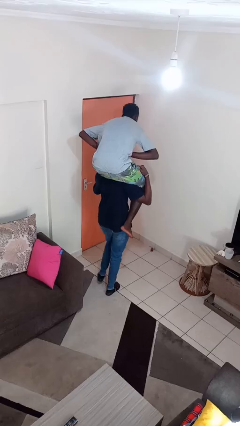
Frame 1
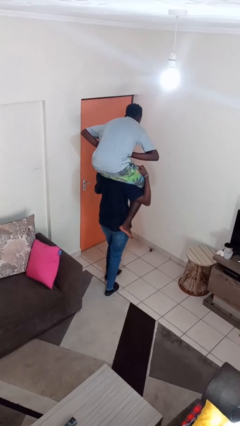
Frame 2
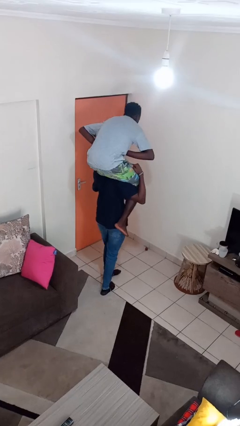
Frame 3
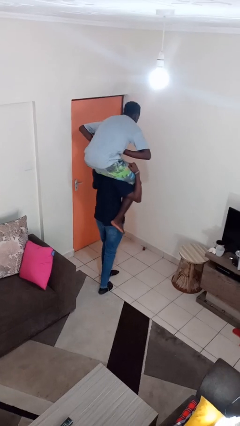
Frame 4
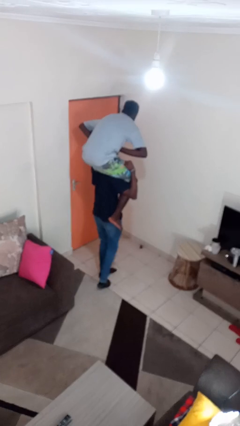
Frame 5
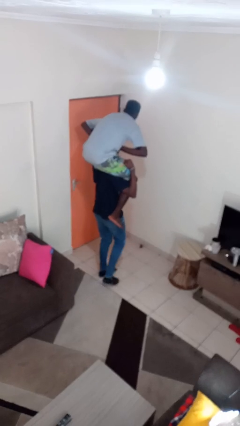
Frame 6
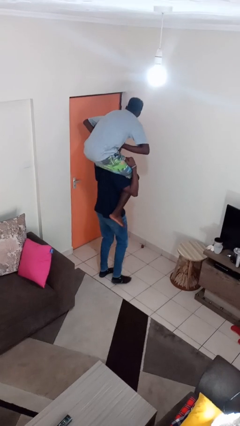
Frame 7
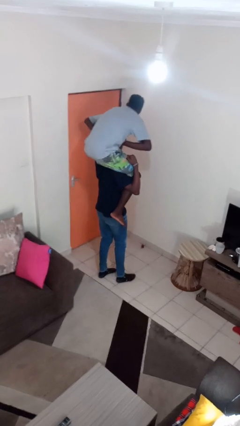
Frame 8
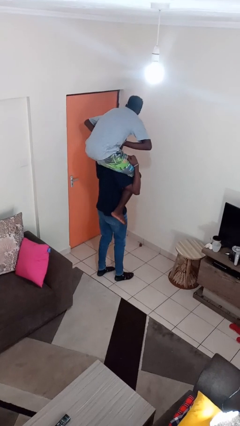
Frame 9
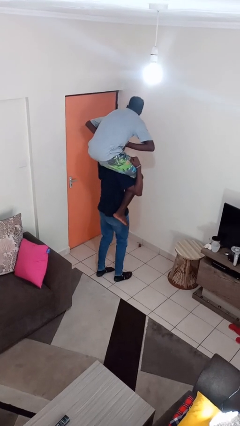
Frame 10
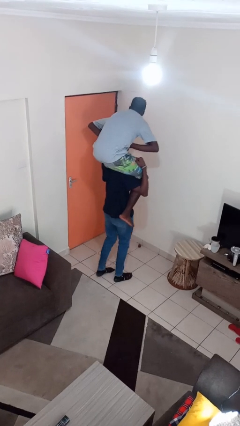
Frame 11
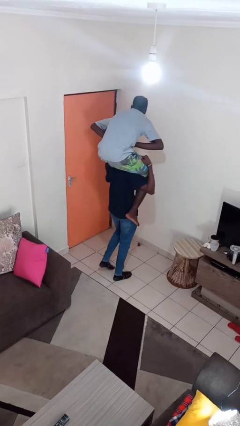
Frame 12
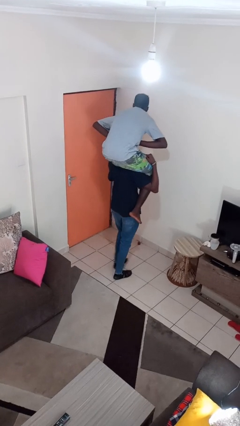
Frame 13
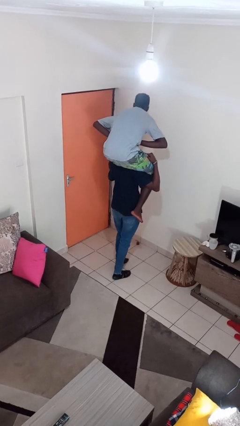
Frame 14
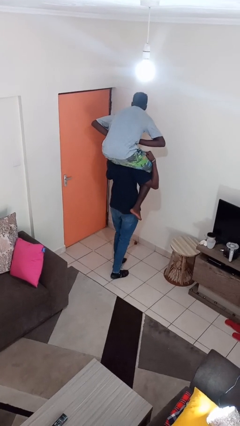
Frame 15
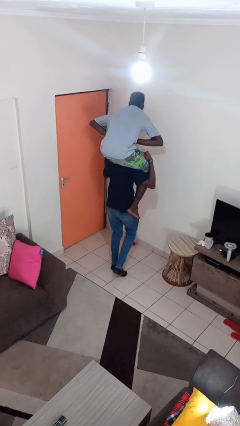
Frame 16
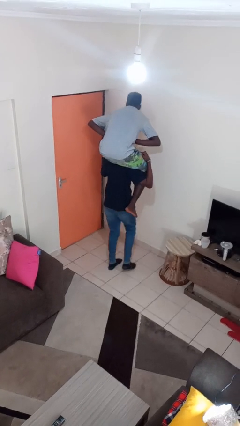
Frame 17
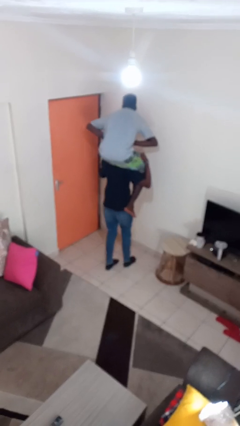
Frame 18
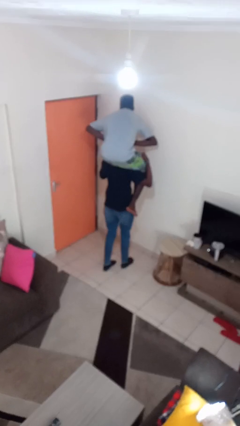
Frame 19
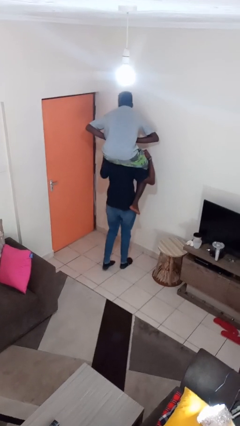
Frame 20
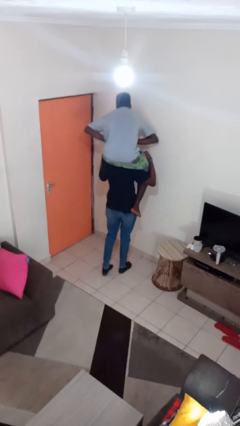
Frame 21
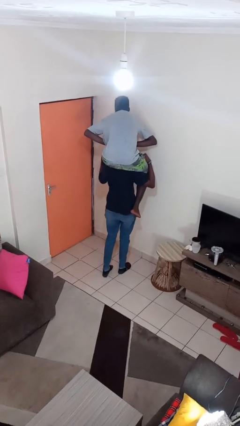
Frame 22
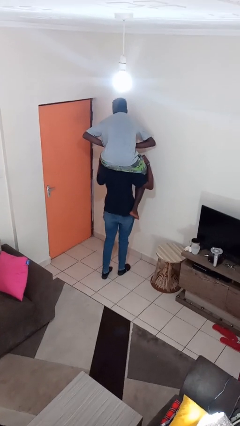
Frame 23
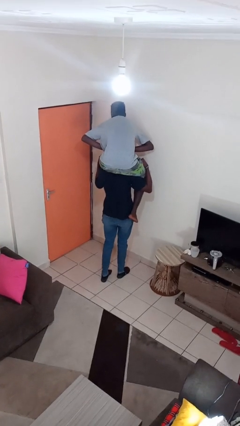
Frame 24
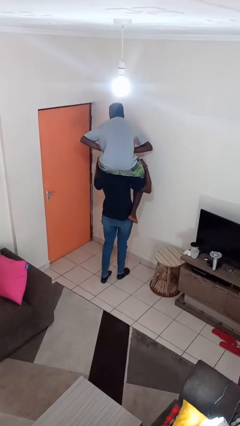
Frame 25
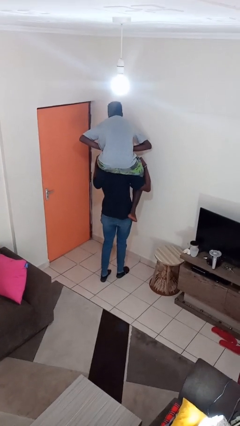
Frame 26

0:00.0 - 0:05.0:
person carries person on shoulders

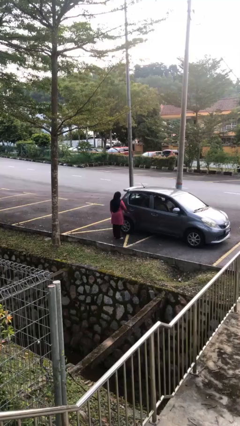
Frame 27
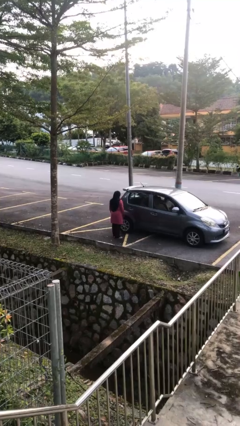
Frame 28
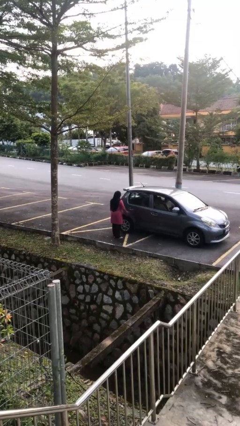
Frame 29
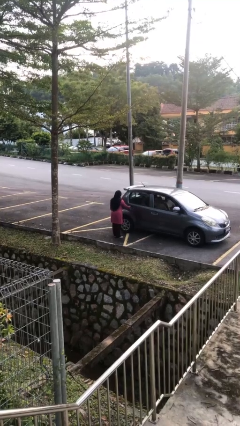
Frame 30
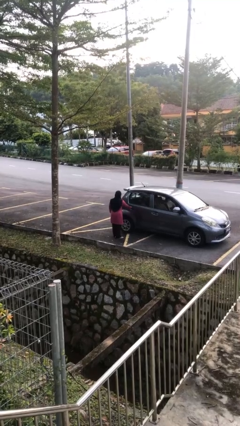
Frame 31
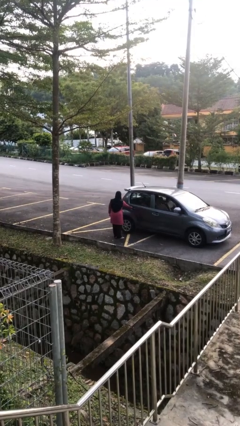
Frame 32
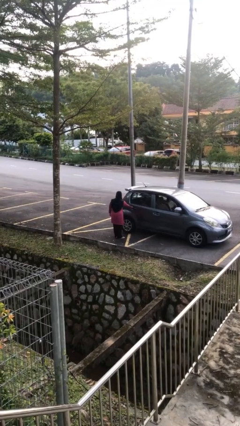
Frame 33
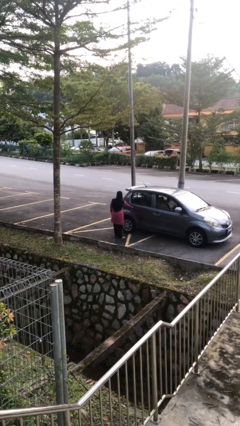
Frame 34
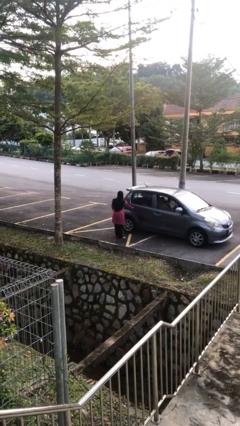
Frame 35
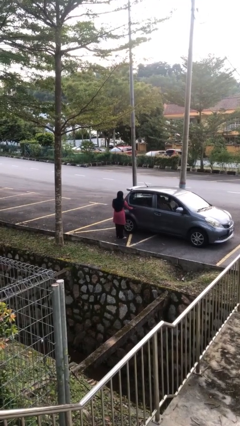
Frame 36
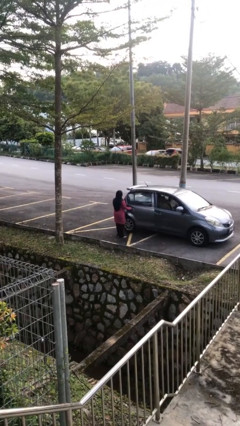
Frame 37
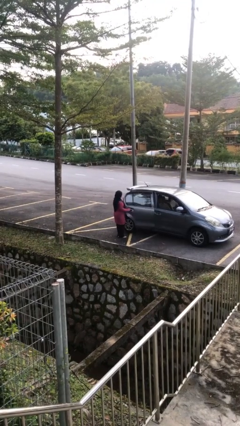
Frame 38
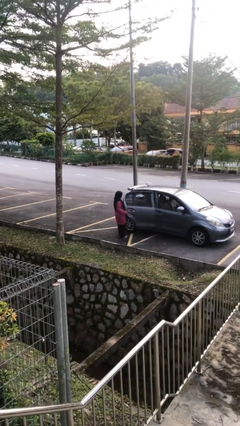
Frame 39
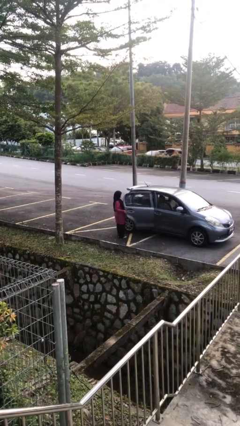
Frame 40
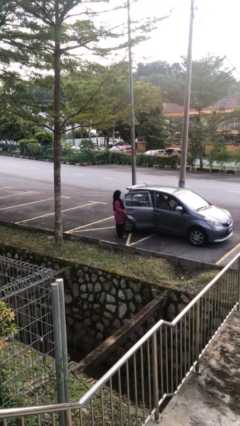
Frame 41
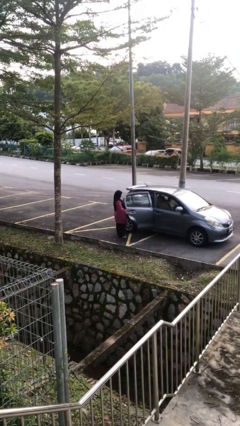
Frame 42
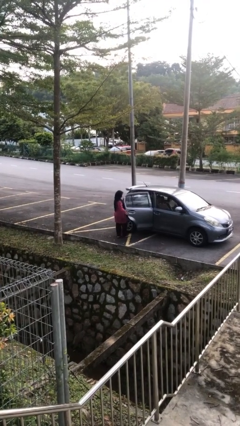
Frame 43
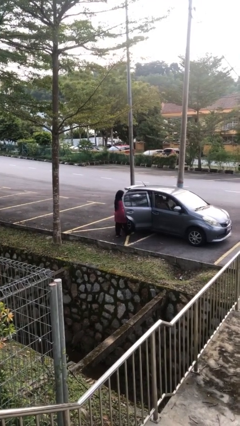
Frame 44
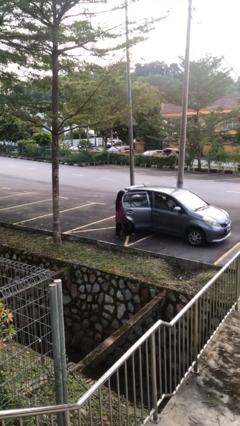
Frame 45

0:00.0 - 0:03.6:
person opens car door

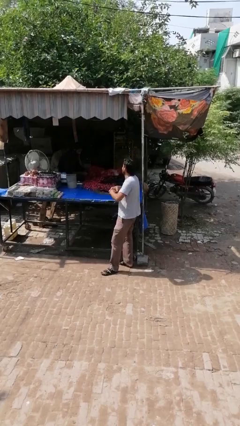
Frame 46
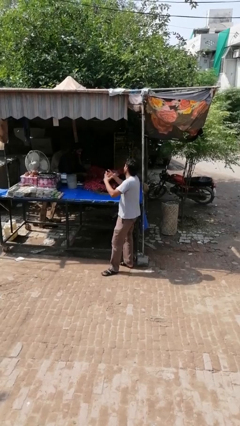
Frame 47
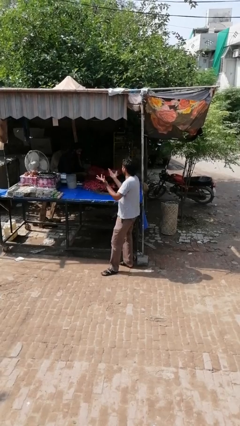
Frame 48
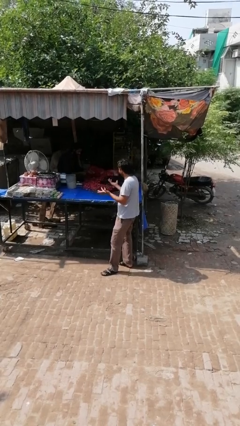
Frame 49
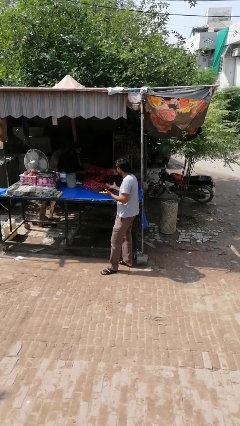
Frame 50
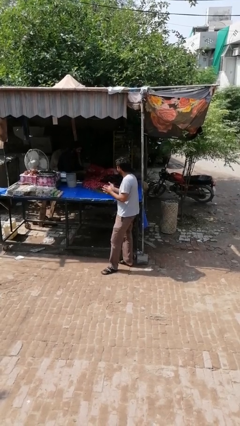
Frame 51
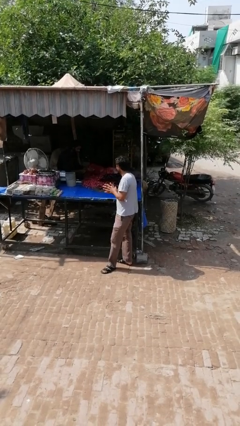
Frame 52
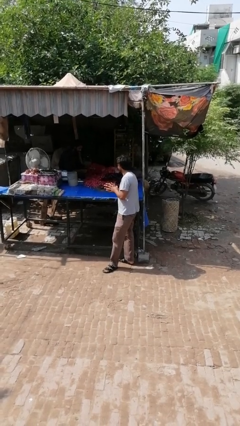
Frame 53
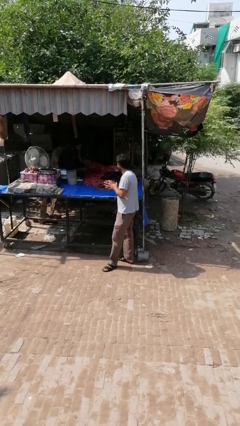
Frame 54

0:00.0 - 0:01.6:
person laughs with person

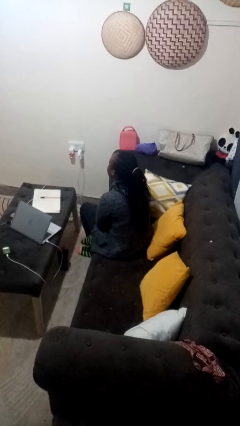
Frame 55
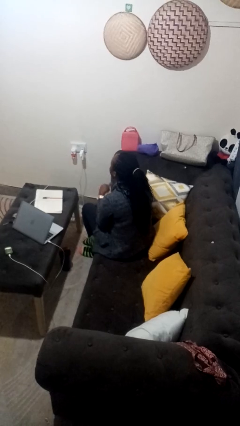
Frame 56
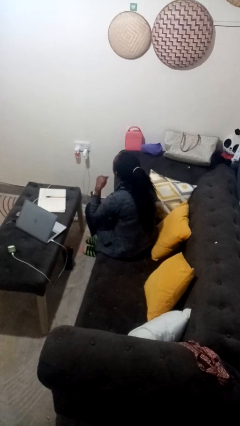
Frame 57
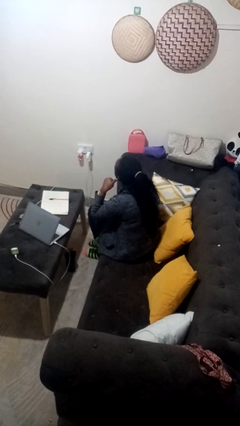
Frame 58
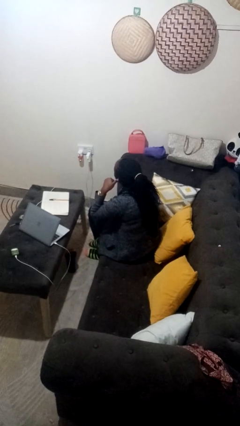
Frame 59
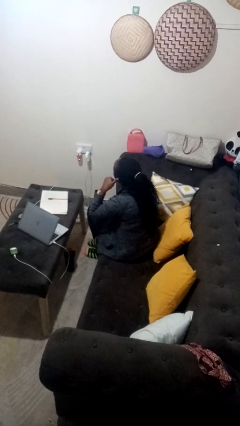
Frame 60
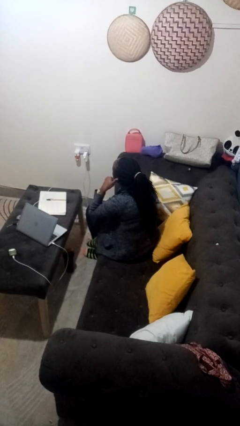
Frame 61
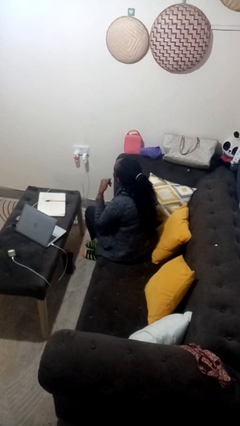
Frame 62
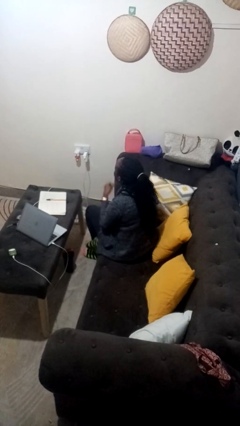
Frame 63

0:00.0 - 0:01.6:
person gestures call me

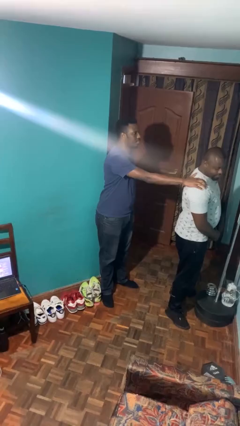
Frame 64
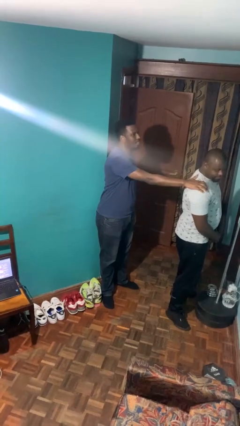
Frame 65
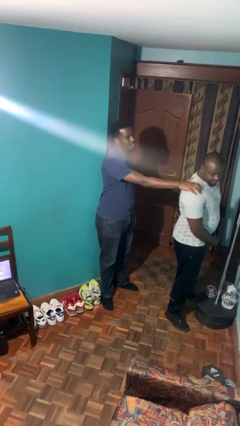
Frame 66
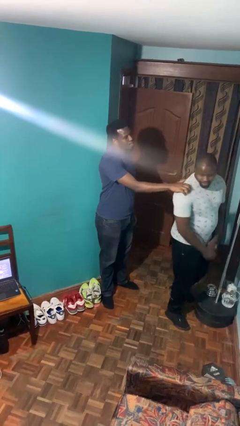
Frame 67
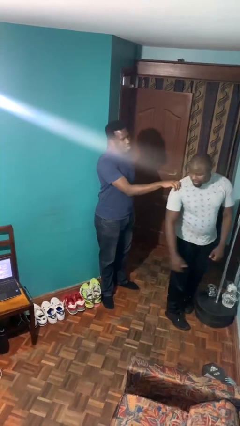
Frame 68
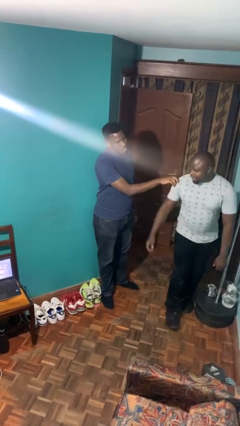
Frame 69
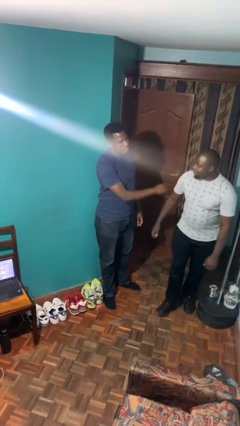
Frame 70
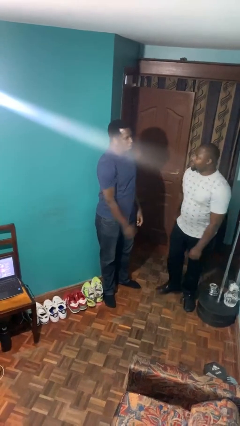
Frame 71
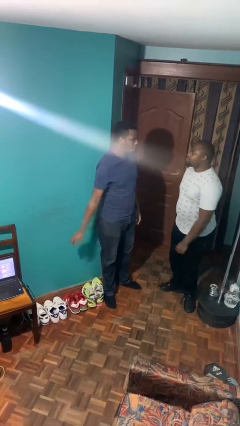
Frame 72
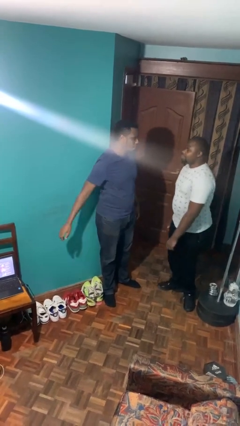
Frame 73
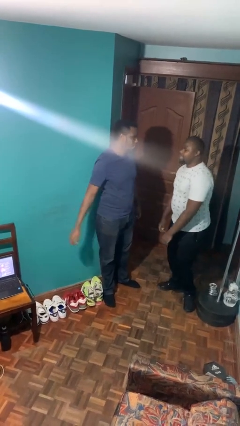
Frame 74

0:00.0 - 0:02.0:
person spins person around

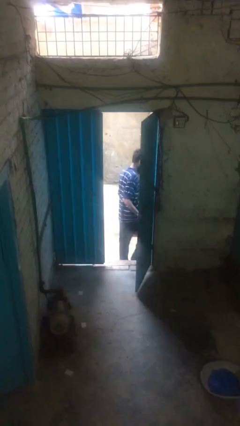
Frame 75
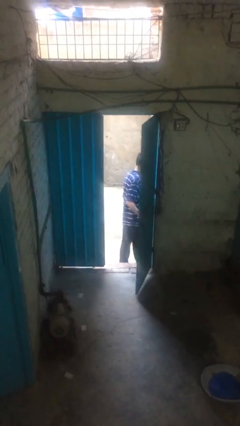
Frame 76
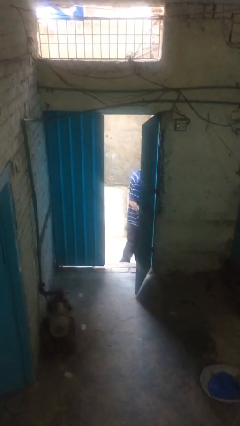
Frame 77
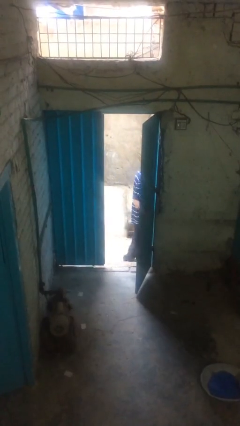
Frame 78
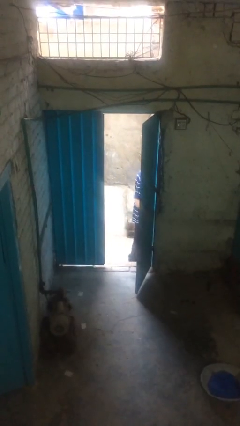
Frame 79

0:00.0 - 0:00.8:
person closes facility door

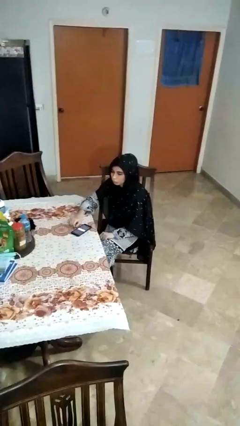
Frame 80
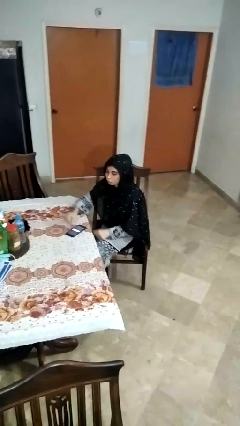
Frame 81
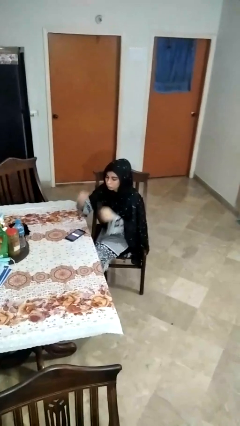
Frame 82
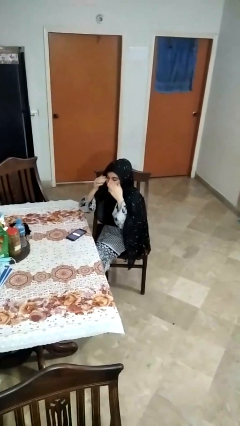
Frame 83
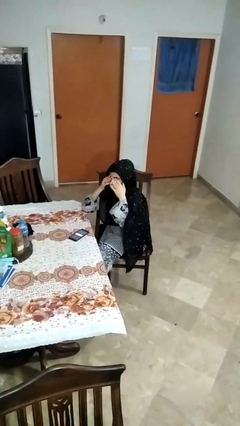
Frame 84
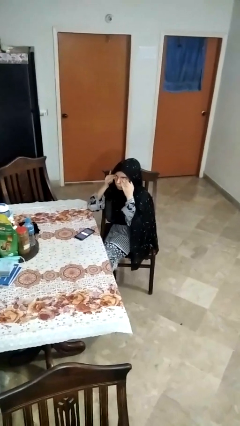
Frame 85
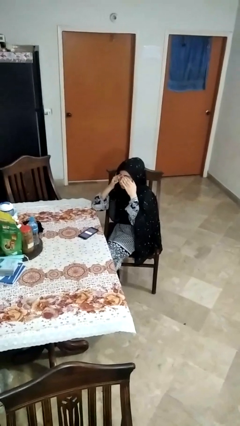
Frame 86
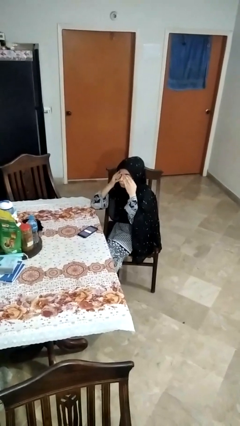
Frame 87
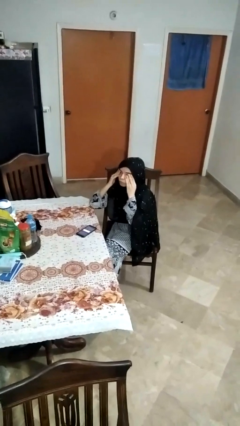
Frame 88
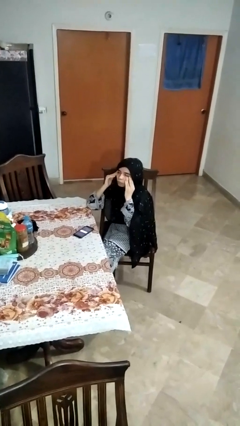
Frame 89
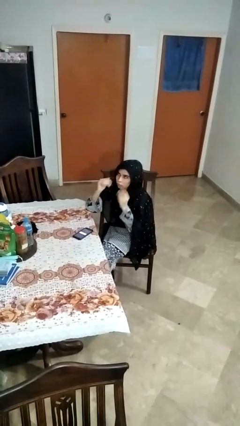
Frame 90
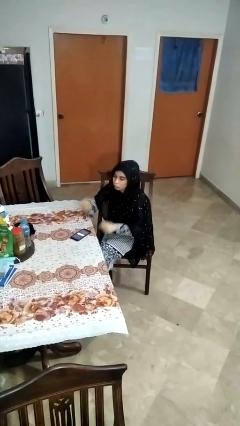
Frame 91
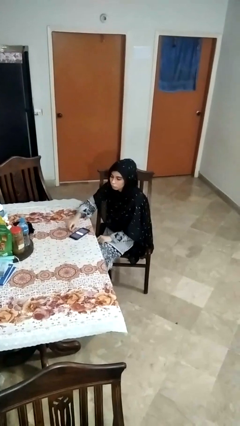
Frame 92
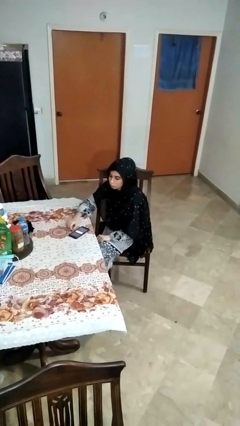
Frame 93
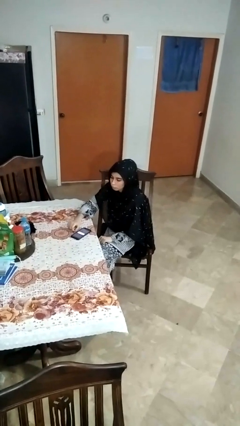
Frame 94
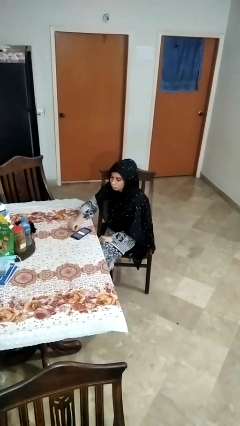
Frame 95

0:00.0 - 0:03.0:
person rubs eyes
